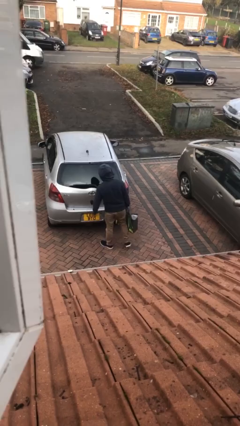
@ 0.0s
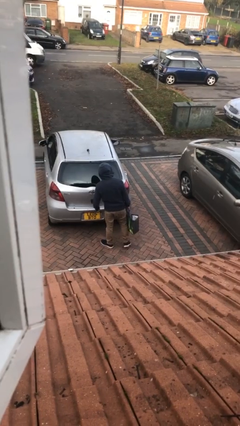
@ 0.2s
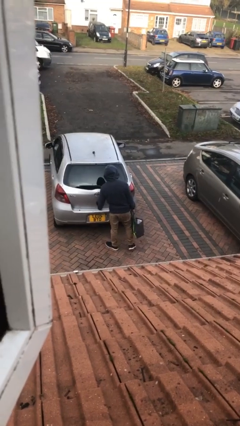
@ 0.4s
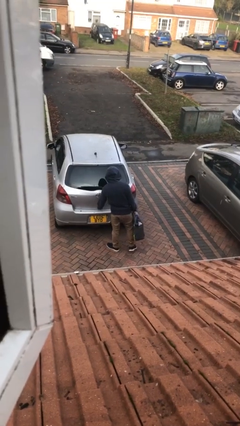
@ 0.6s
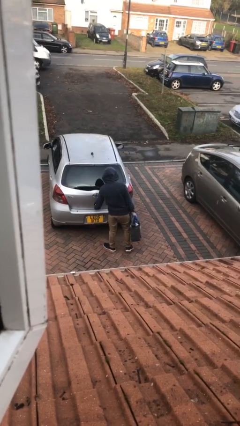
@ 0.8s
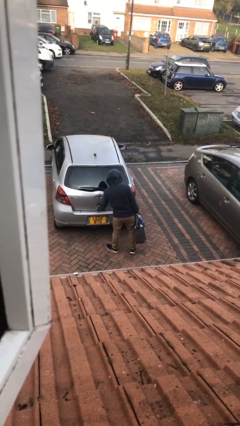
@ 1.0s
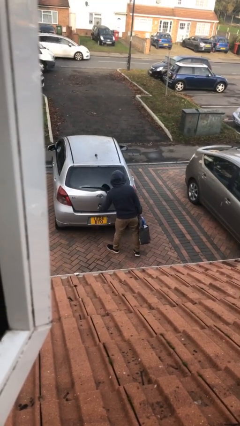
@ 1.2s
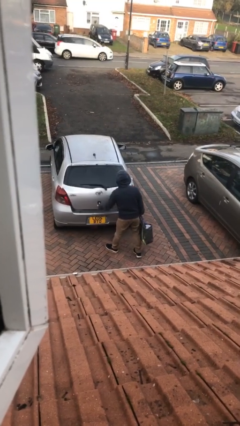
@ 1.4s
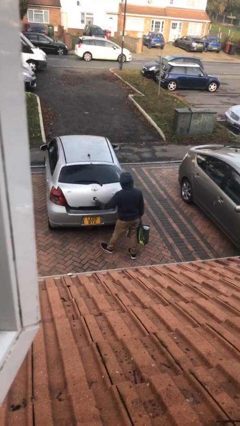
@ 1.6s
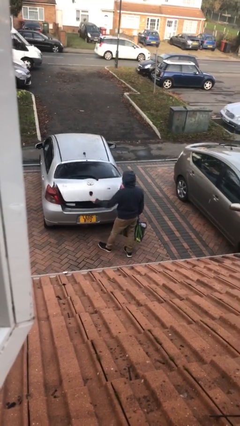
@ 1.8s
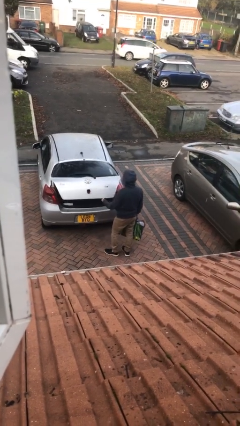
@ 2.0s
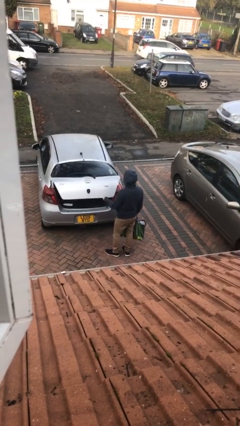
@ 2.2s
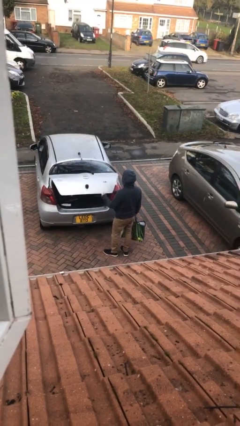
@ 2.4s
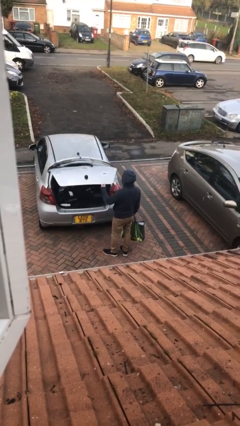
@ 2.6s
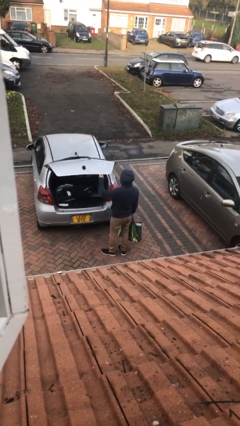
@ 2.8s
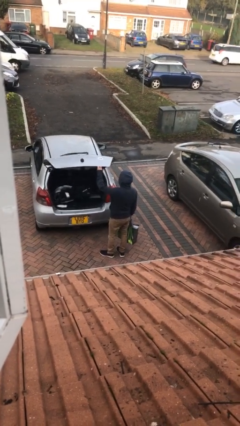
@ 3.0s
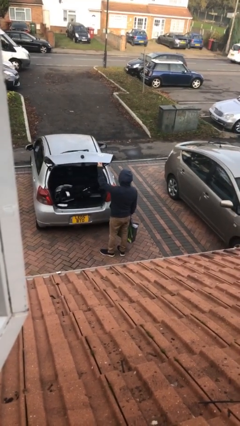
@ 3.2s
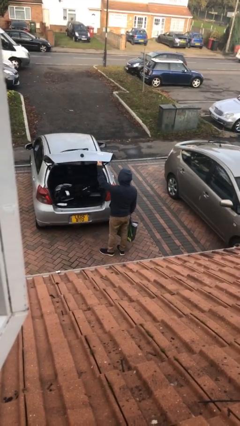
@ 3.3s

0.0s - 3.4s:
person opens car trunk

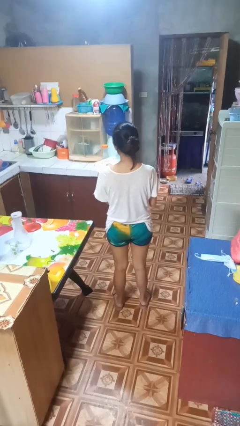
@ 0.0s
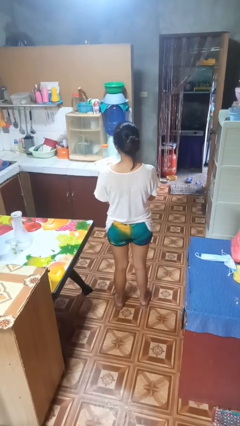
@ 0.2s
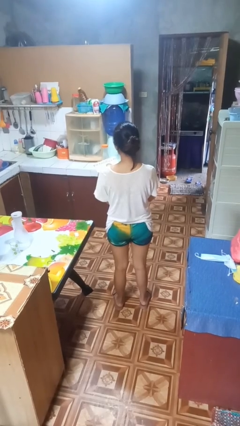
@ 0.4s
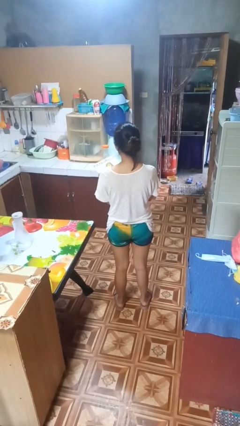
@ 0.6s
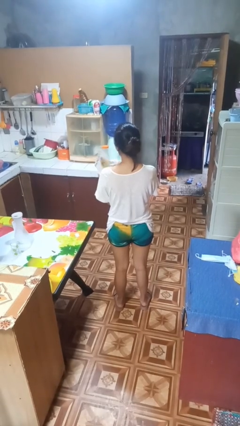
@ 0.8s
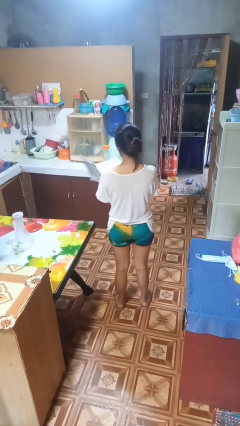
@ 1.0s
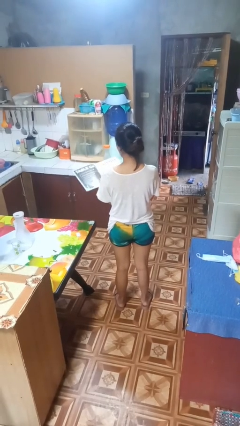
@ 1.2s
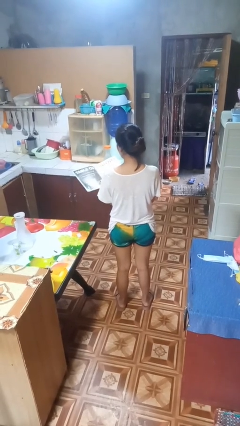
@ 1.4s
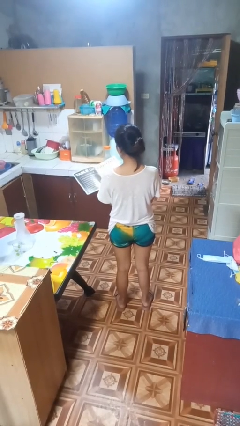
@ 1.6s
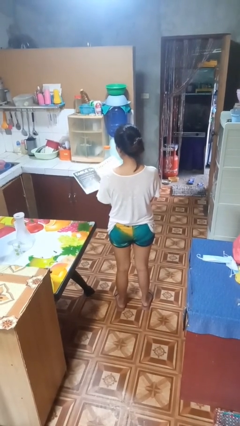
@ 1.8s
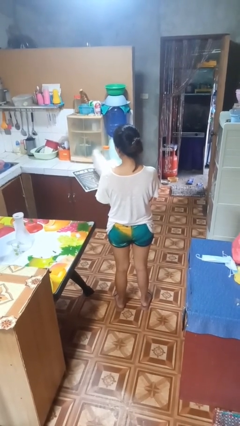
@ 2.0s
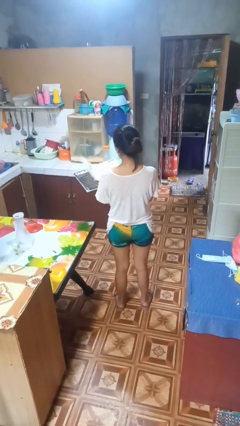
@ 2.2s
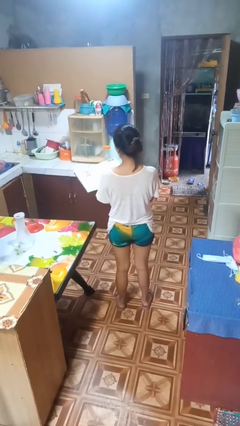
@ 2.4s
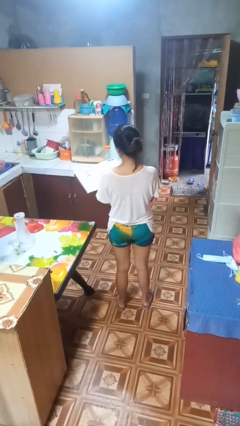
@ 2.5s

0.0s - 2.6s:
person reads magazine

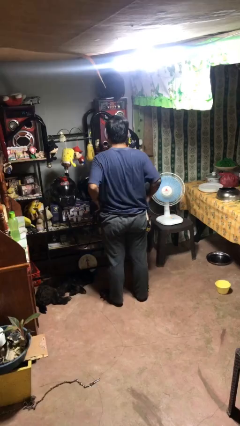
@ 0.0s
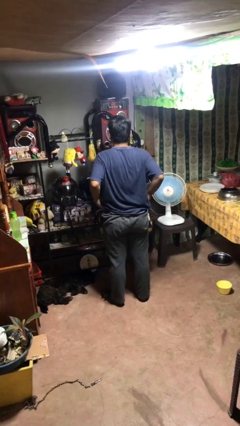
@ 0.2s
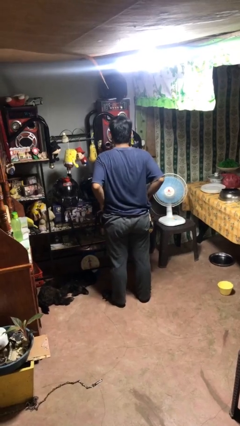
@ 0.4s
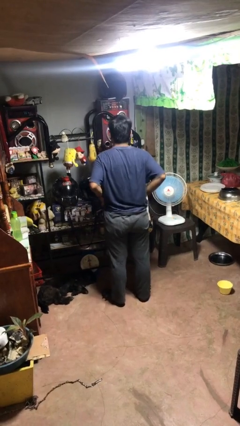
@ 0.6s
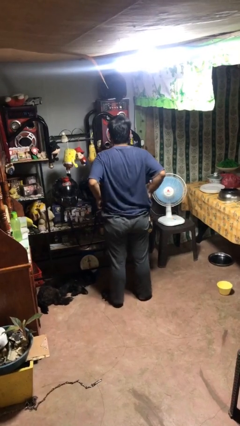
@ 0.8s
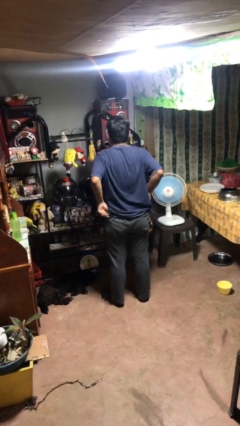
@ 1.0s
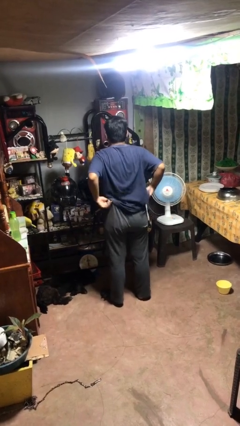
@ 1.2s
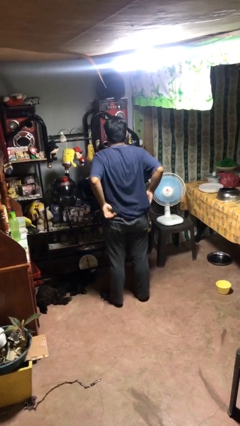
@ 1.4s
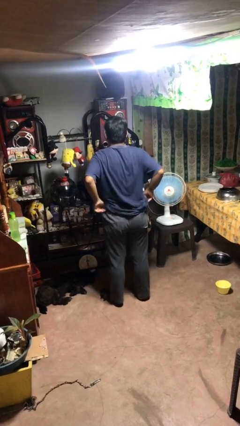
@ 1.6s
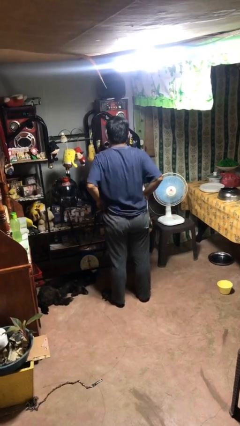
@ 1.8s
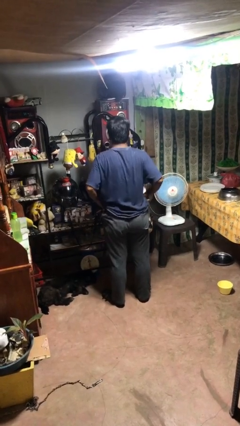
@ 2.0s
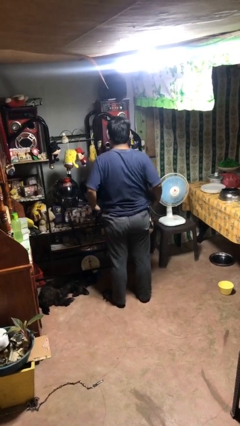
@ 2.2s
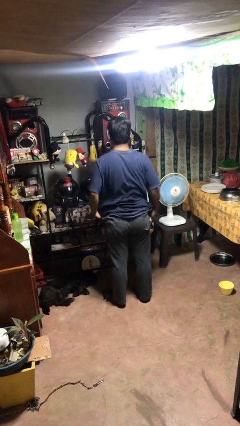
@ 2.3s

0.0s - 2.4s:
person hikes up pants

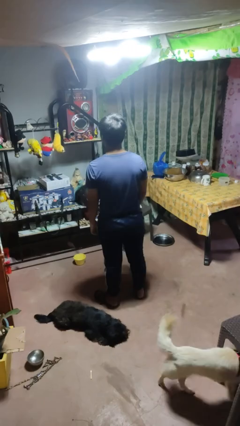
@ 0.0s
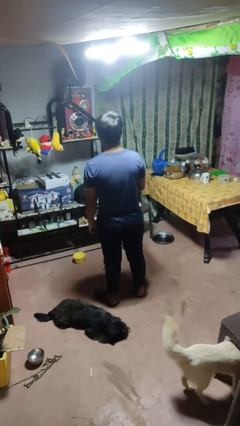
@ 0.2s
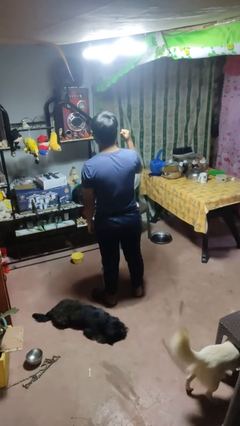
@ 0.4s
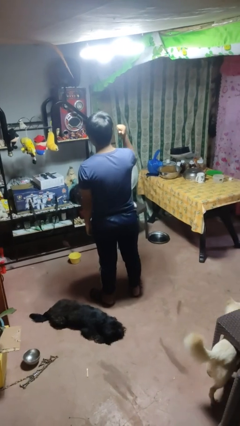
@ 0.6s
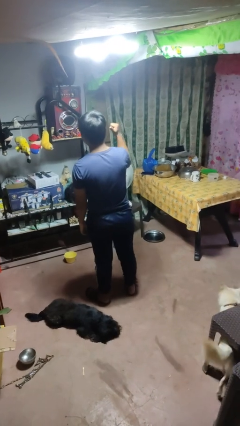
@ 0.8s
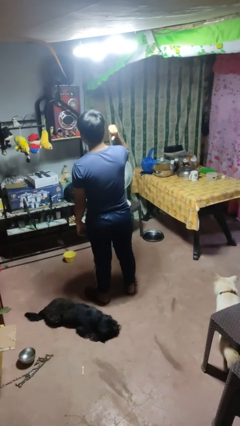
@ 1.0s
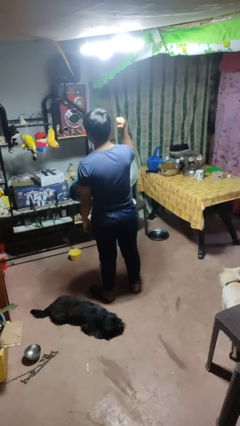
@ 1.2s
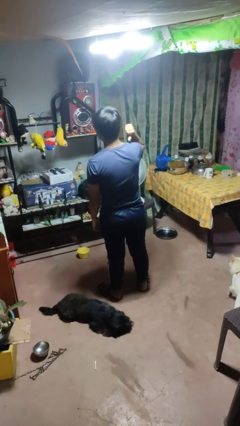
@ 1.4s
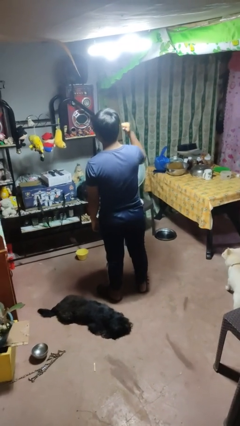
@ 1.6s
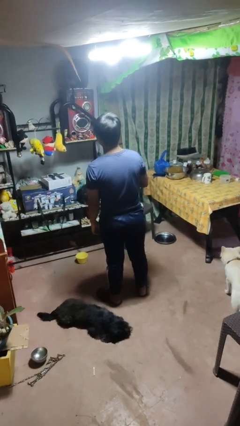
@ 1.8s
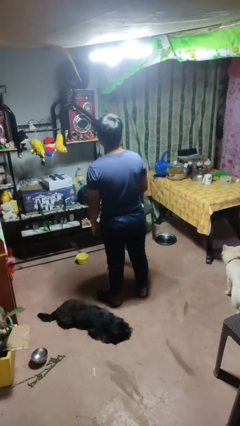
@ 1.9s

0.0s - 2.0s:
person gestures behind me

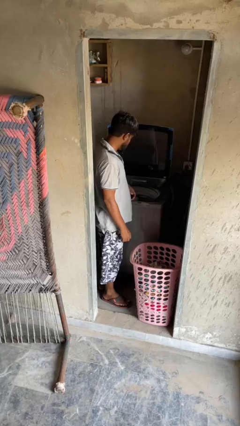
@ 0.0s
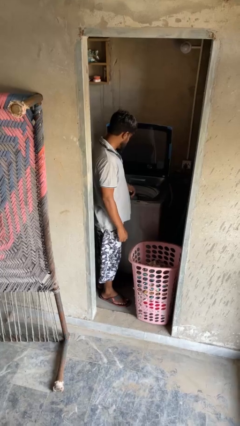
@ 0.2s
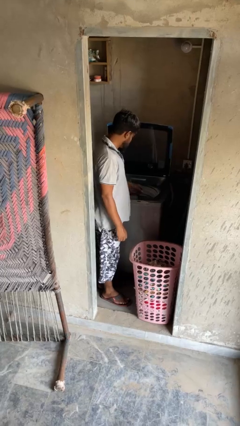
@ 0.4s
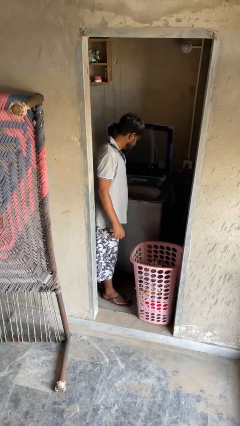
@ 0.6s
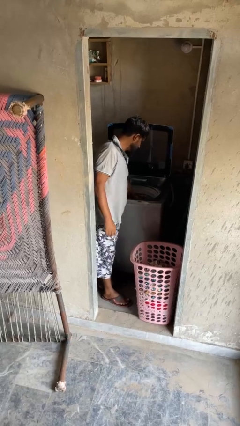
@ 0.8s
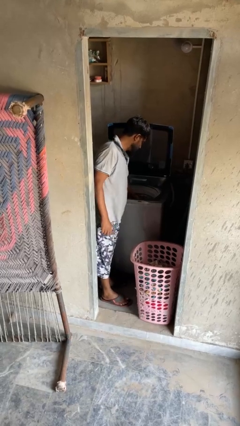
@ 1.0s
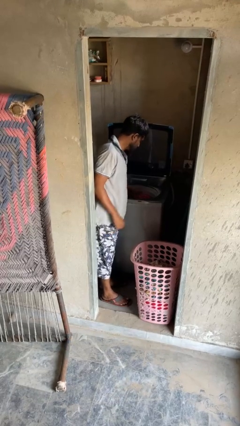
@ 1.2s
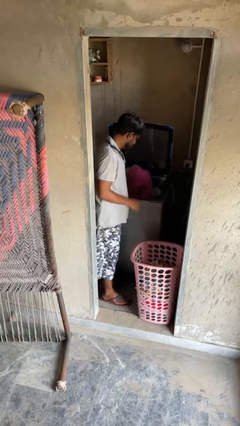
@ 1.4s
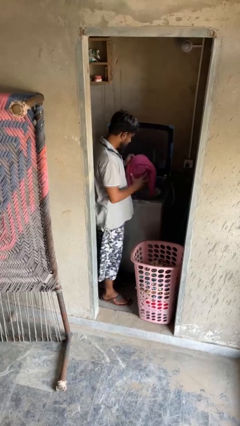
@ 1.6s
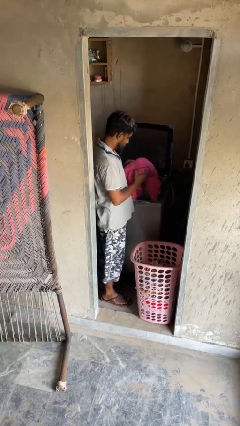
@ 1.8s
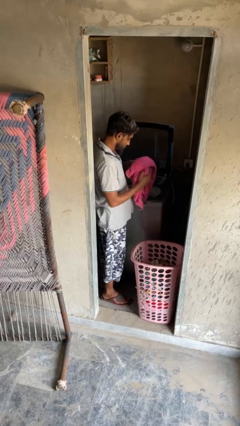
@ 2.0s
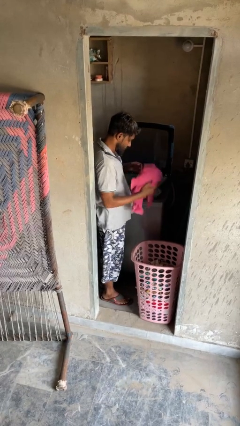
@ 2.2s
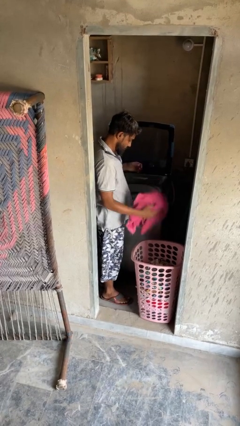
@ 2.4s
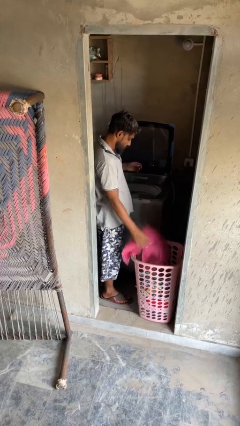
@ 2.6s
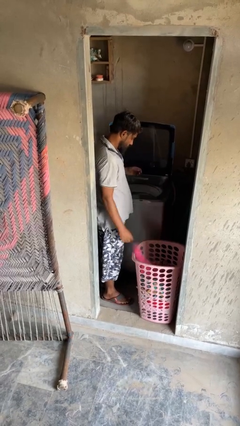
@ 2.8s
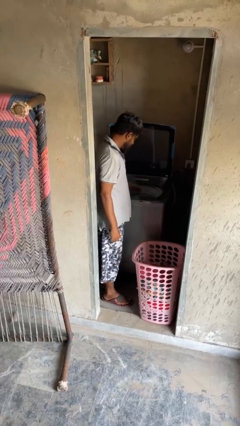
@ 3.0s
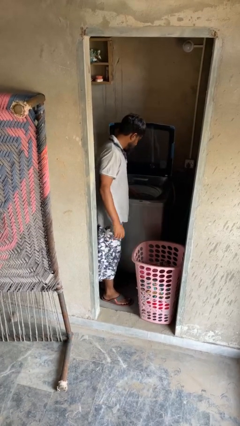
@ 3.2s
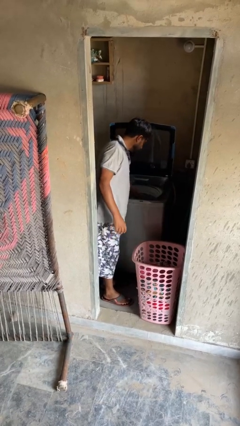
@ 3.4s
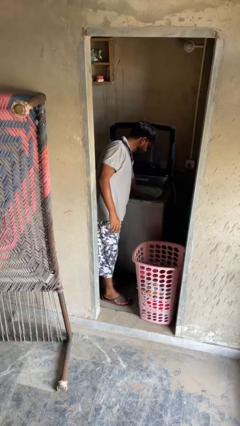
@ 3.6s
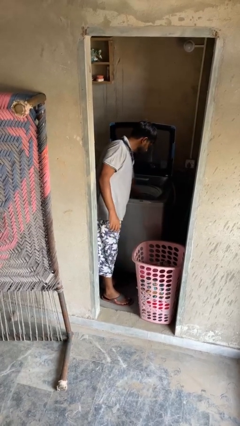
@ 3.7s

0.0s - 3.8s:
person loads clotheswasher

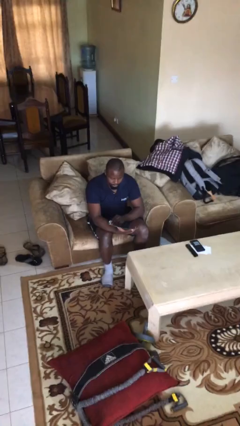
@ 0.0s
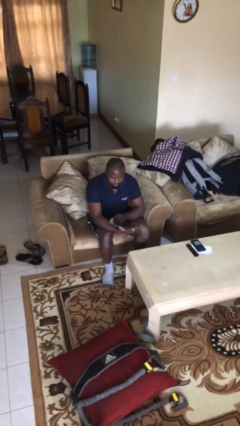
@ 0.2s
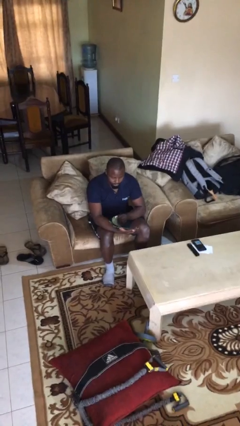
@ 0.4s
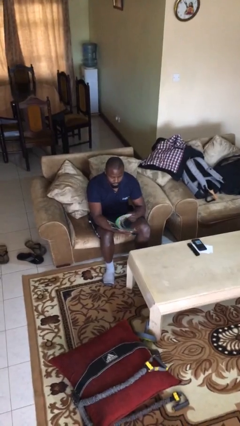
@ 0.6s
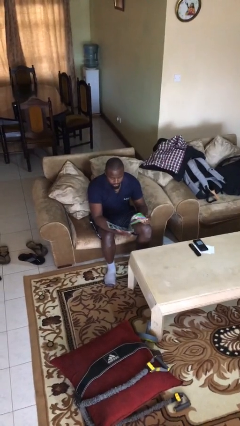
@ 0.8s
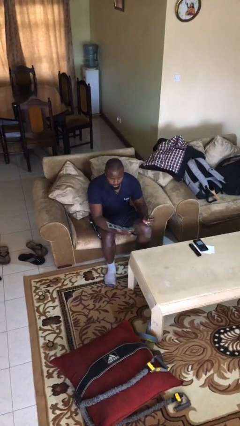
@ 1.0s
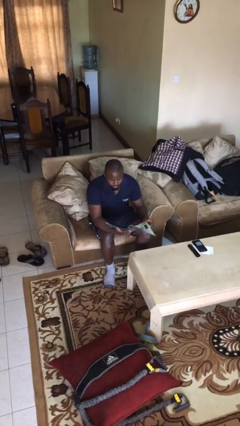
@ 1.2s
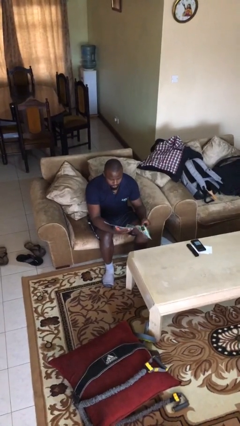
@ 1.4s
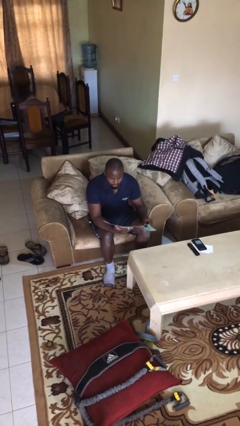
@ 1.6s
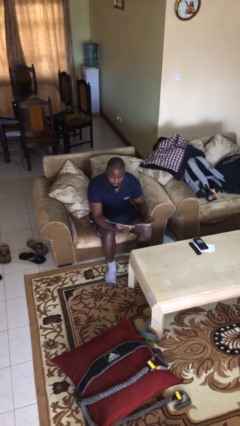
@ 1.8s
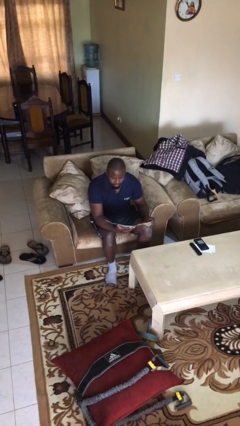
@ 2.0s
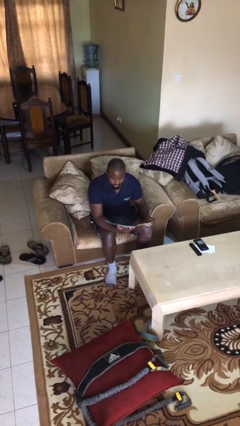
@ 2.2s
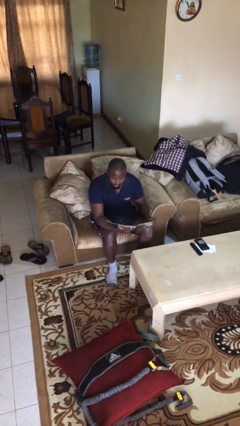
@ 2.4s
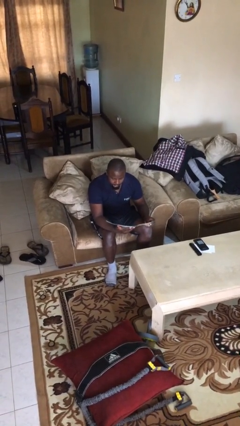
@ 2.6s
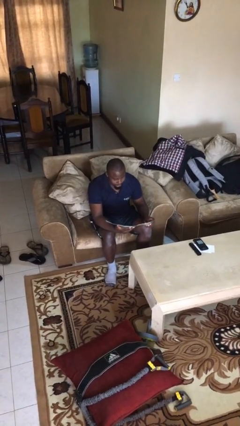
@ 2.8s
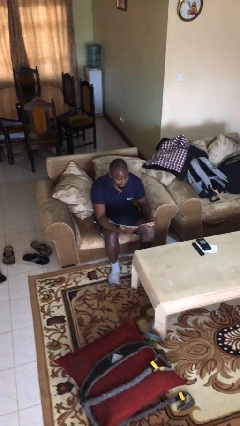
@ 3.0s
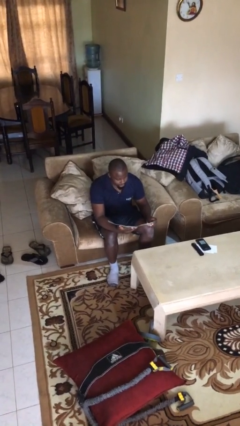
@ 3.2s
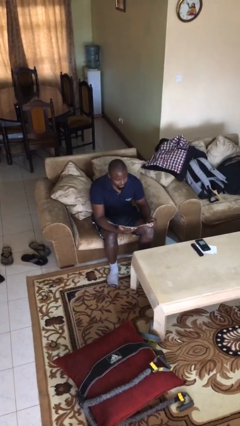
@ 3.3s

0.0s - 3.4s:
person reads document
